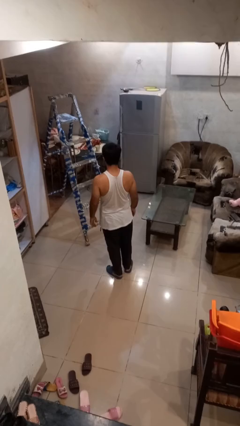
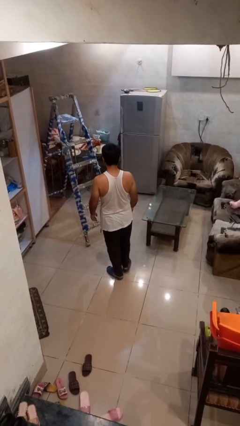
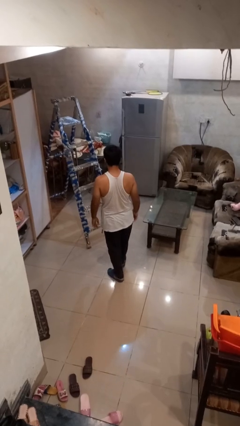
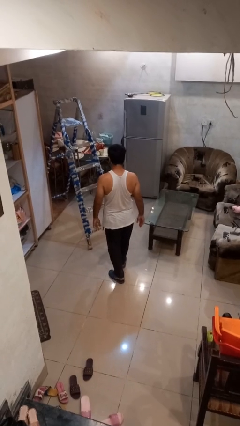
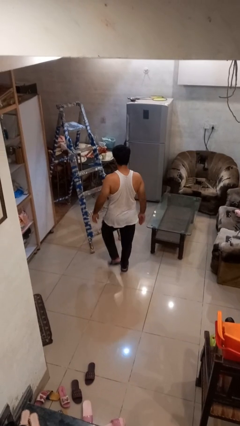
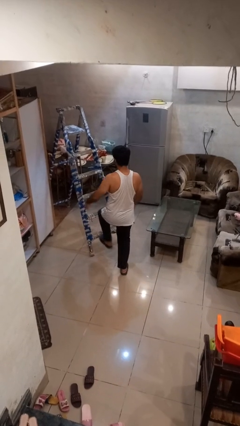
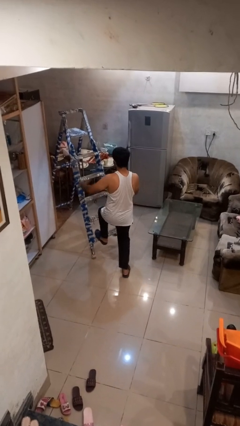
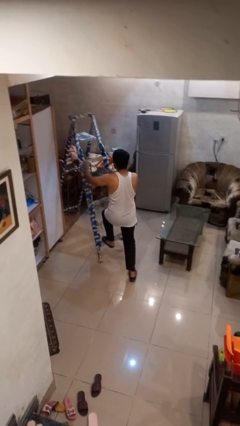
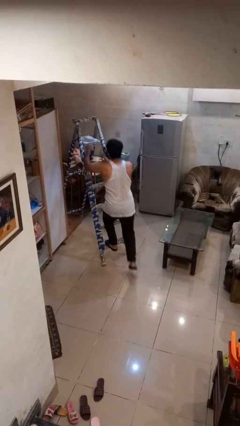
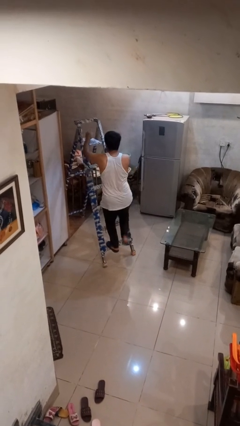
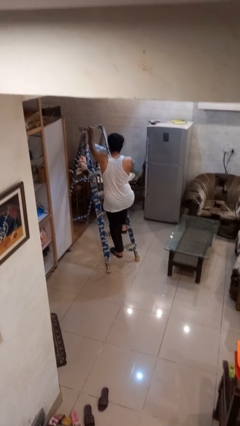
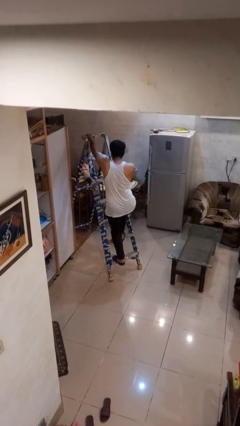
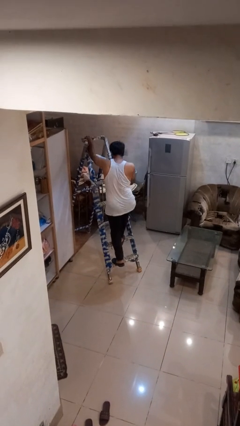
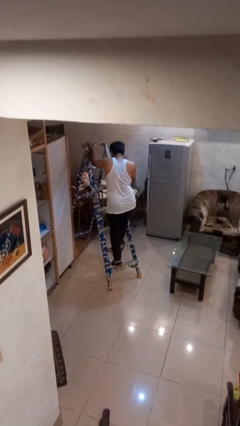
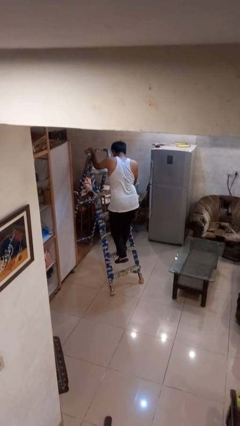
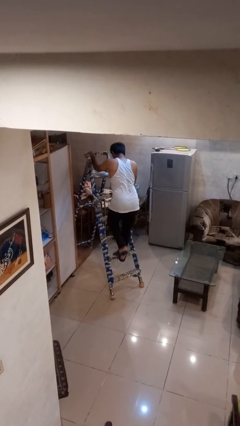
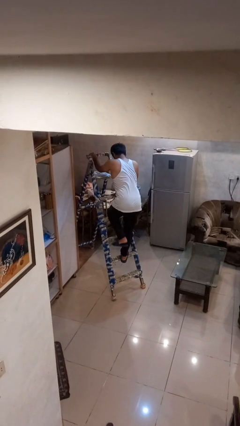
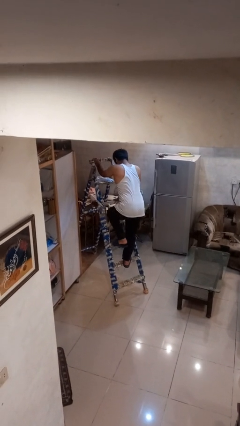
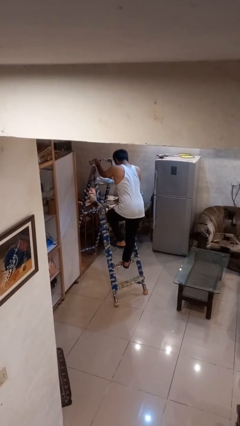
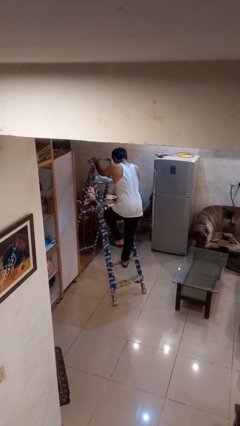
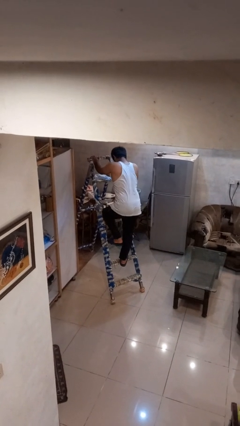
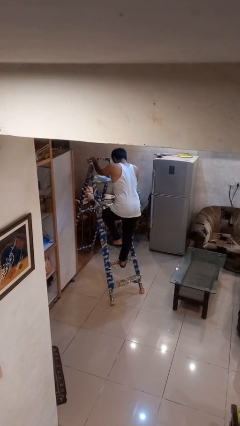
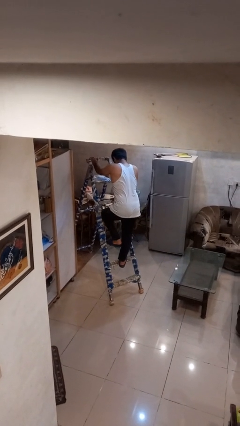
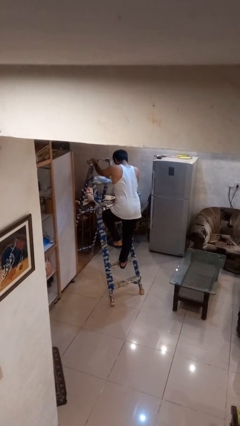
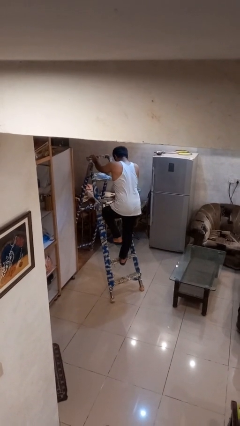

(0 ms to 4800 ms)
person climbs up ladder

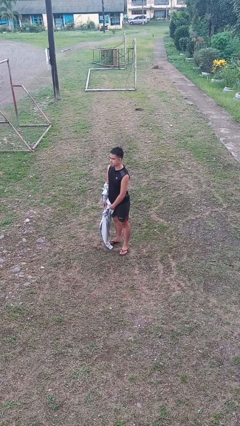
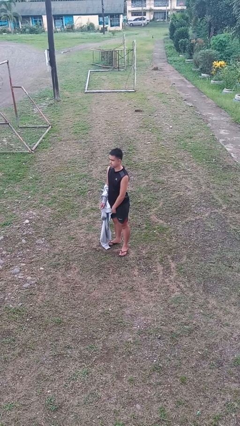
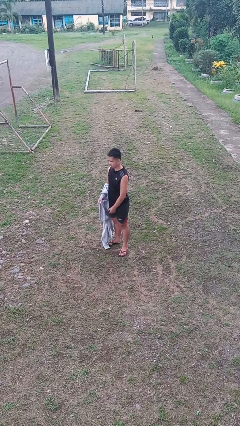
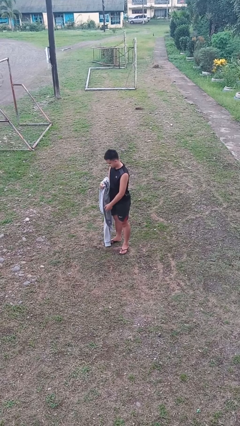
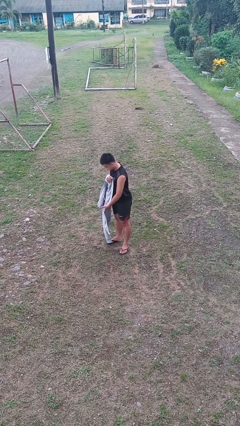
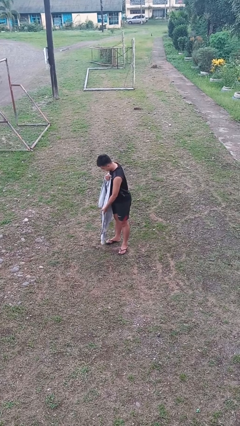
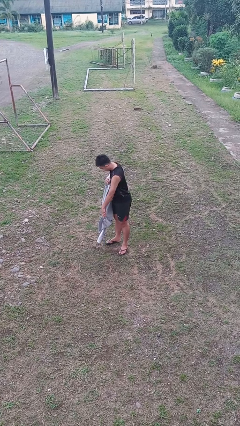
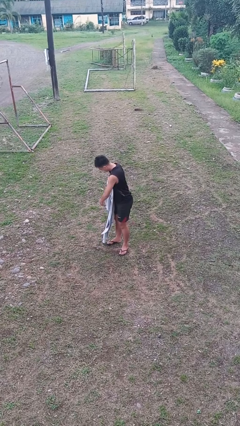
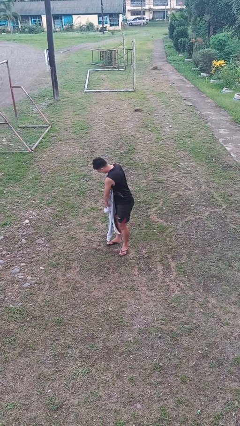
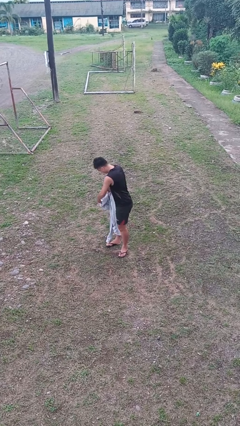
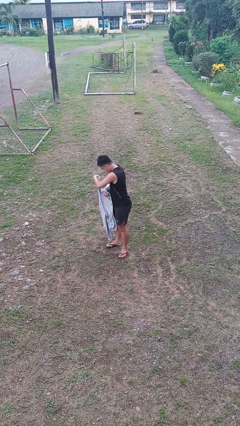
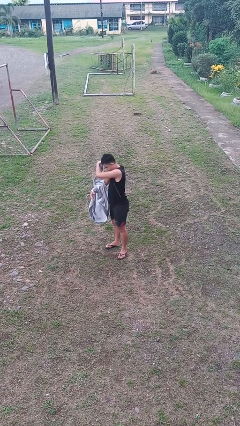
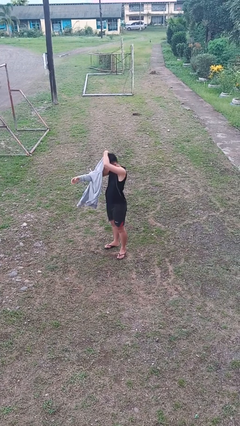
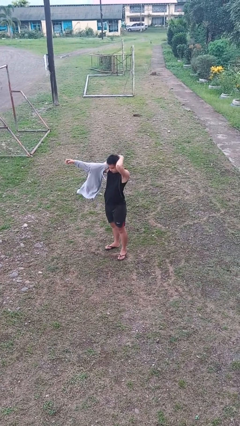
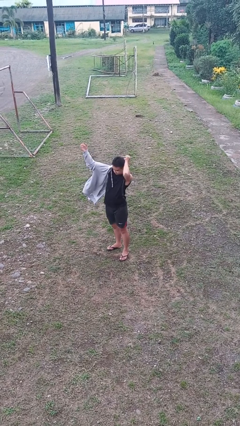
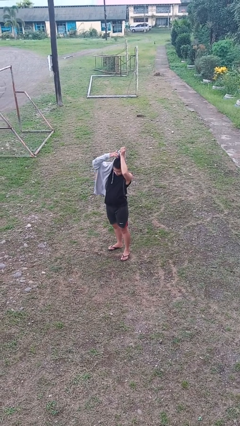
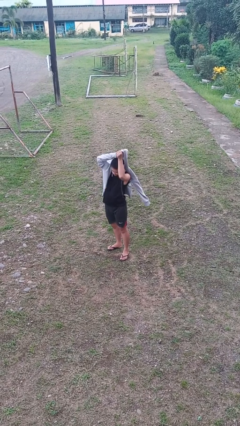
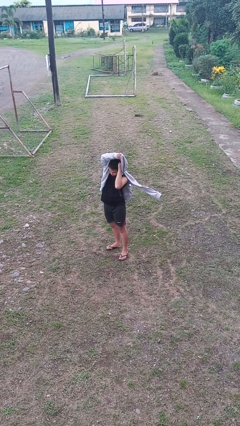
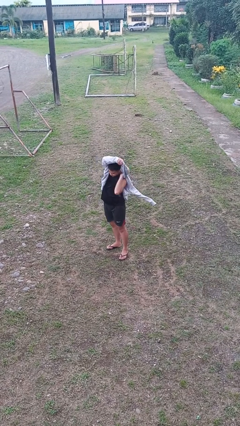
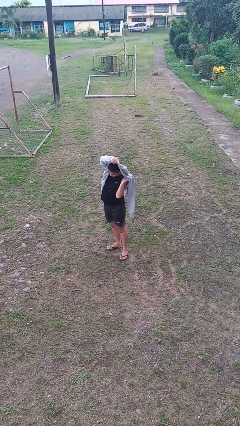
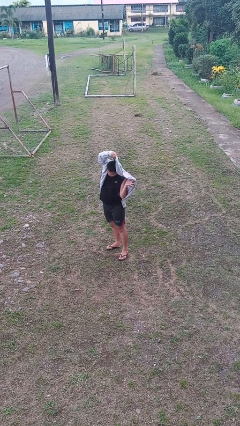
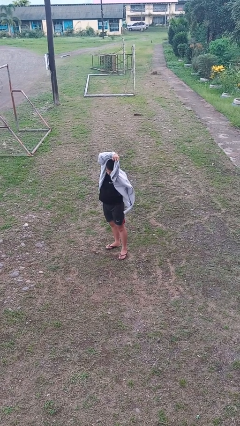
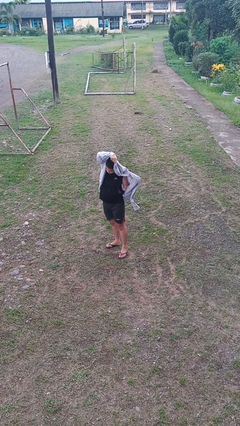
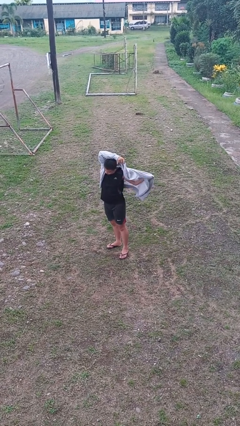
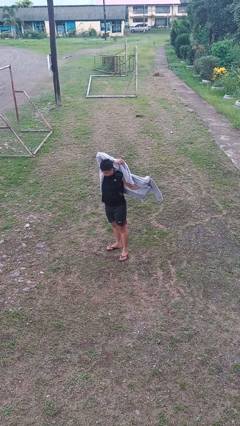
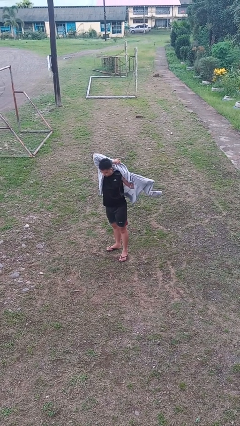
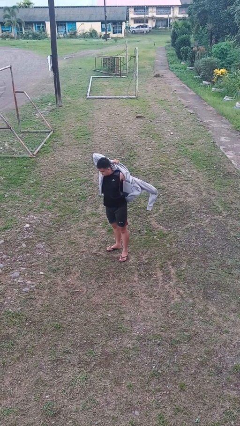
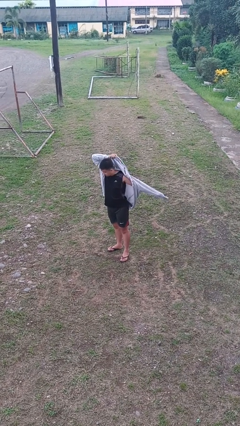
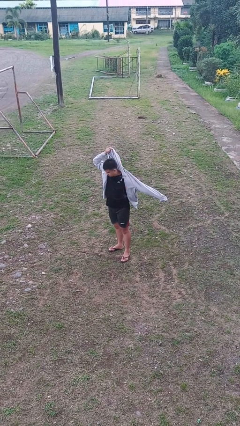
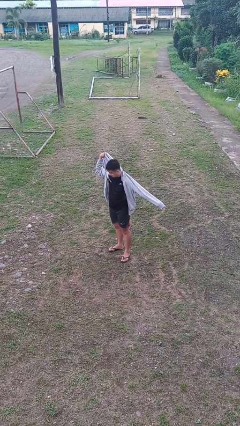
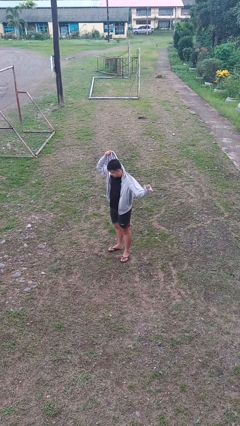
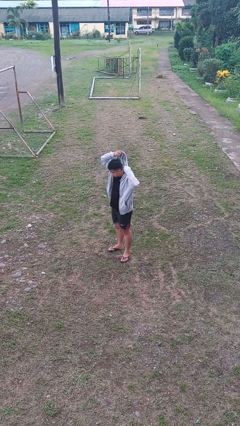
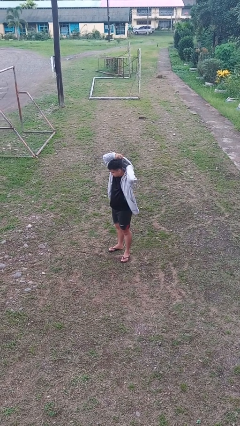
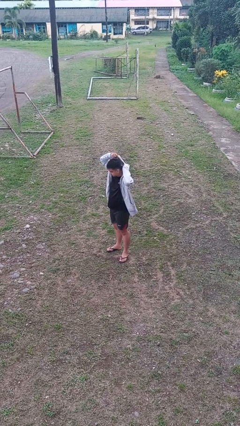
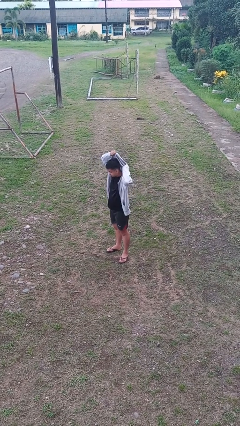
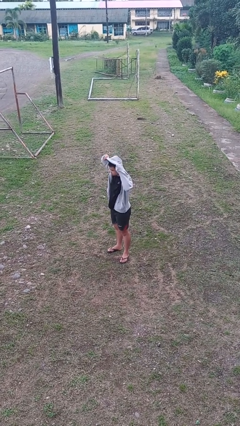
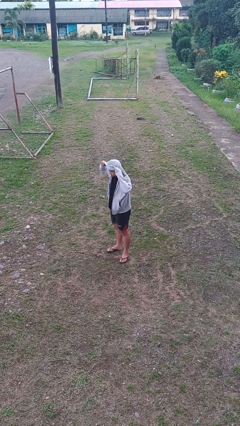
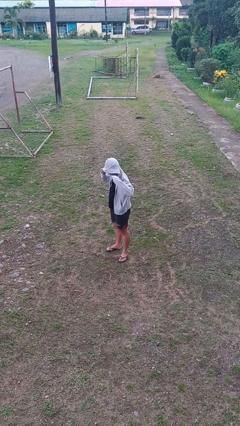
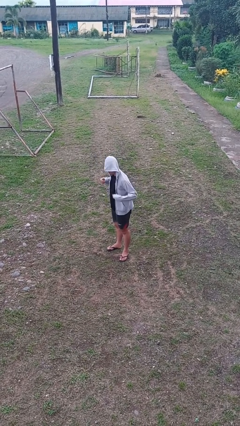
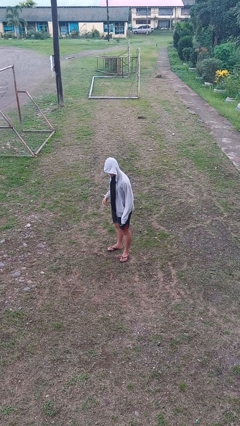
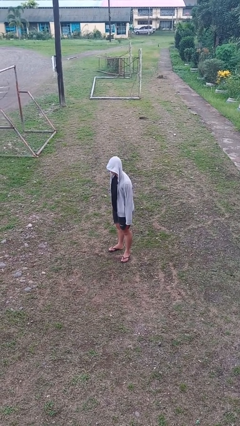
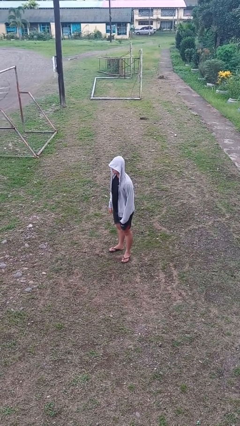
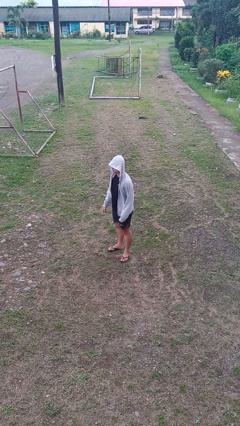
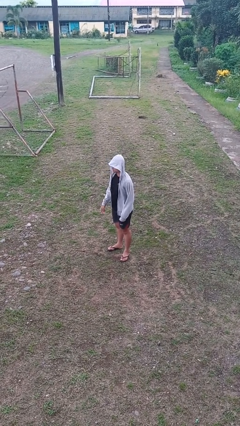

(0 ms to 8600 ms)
person puts on hoodie

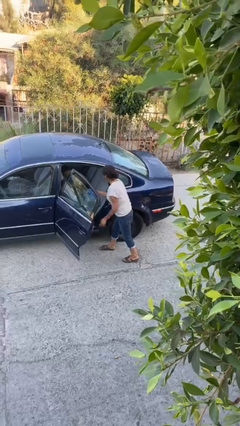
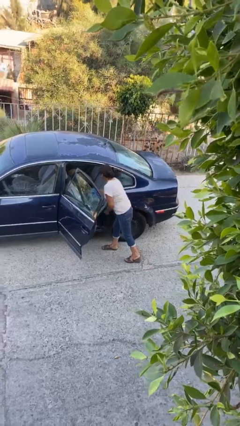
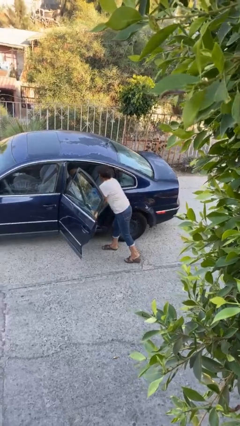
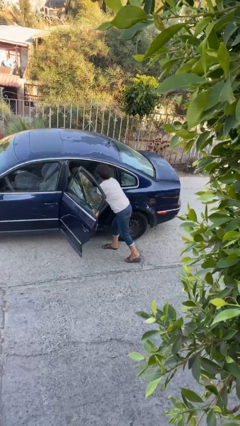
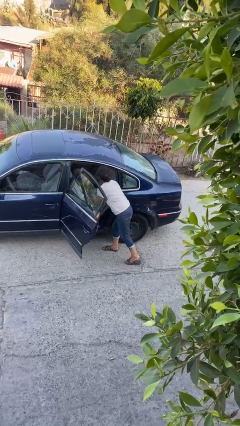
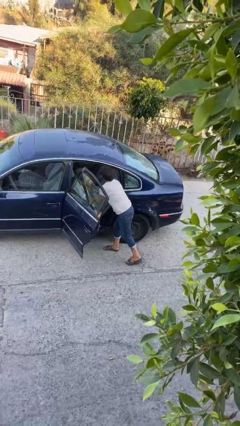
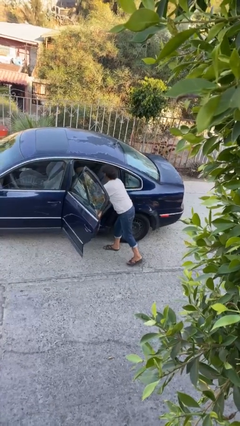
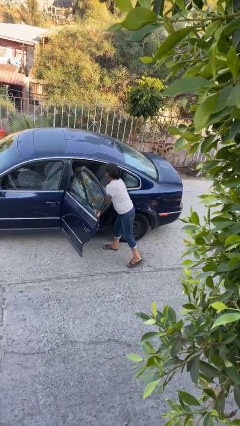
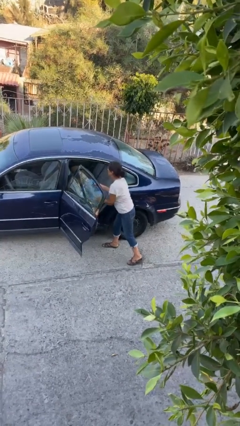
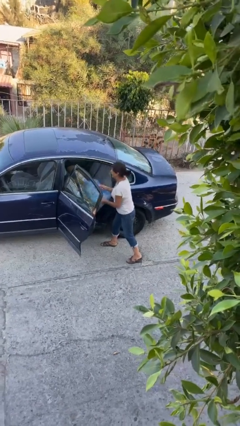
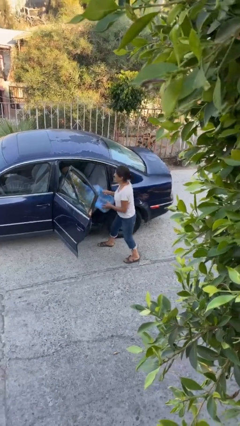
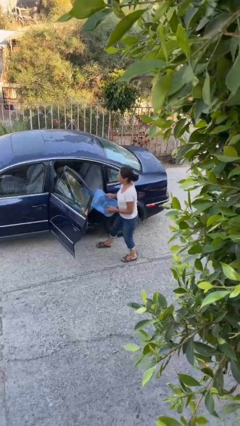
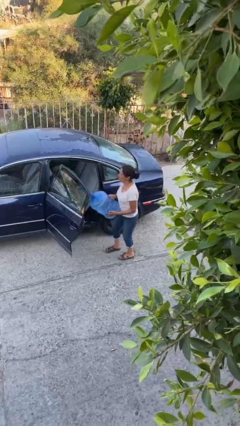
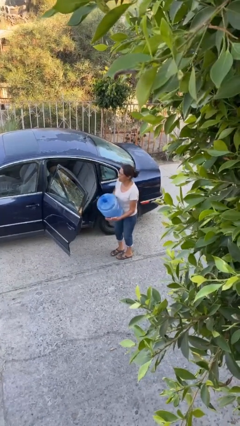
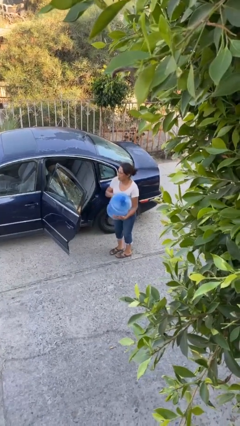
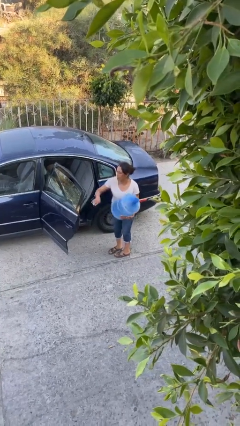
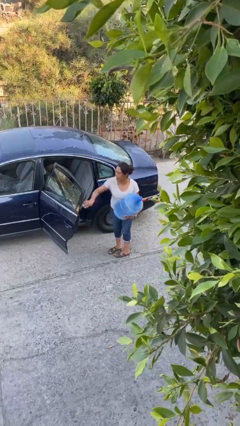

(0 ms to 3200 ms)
person unloads car

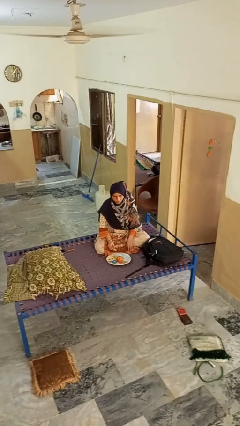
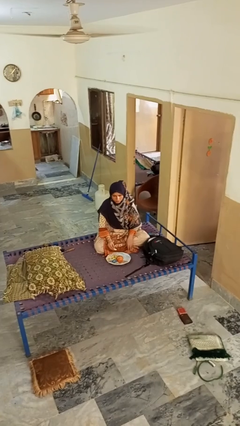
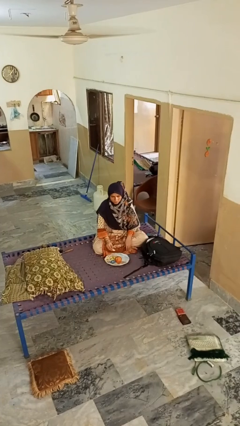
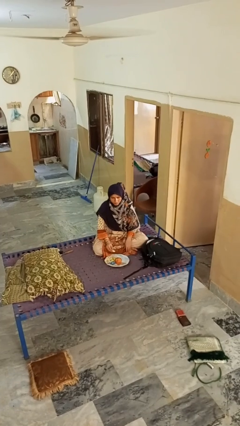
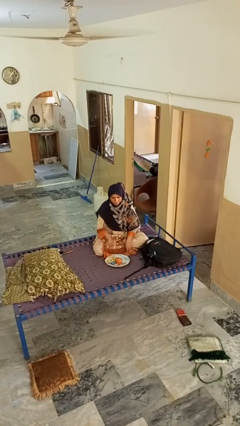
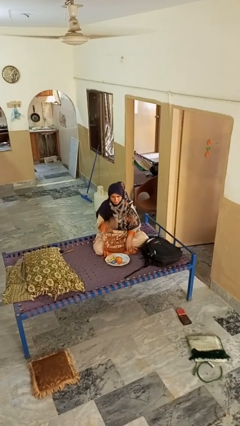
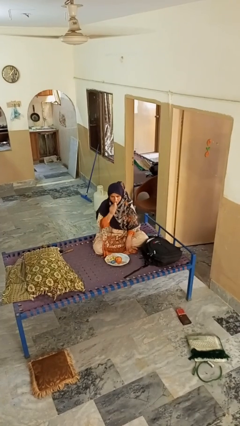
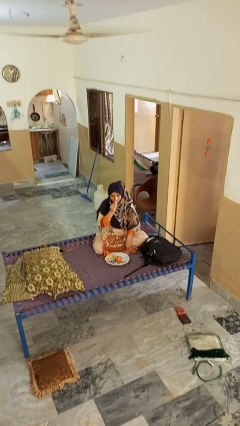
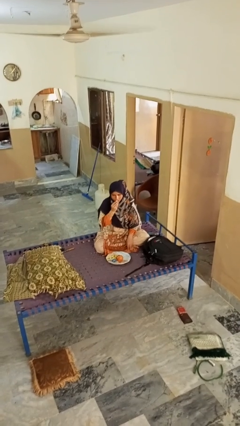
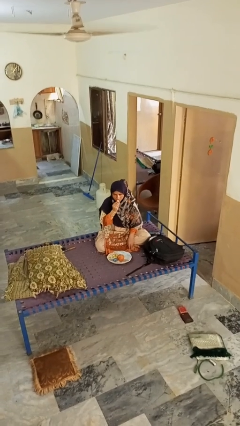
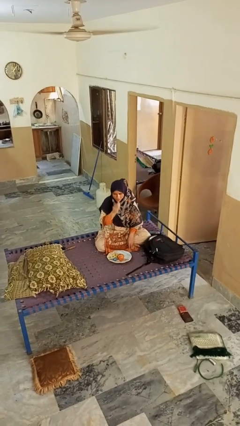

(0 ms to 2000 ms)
person eats apple
